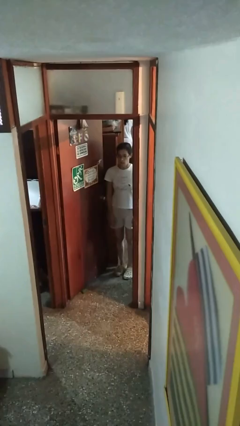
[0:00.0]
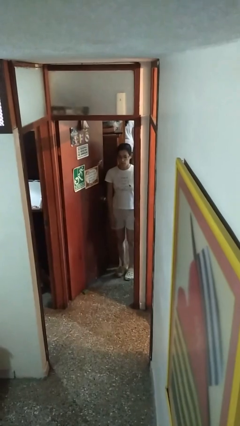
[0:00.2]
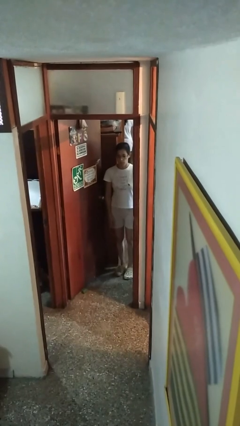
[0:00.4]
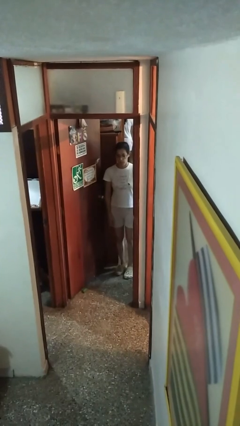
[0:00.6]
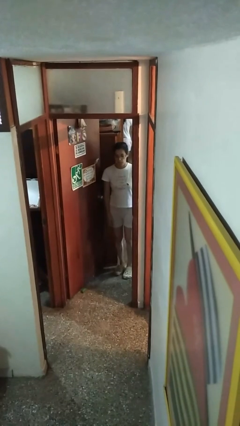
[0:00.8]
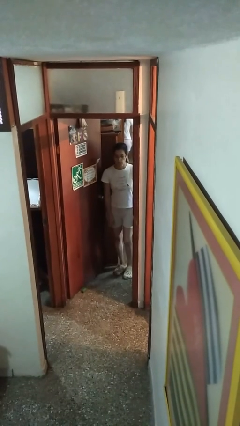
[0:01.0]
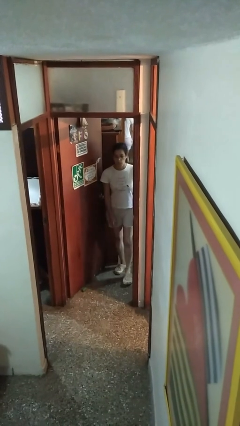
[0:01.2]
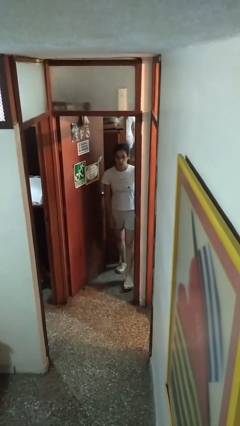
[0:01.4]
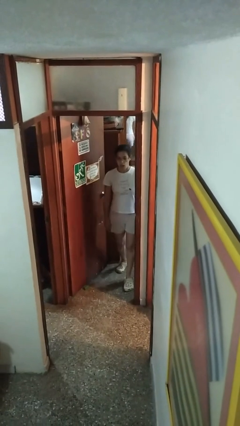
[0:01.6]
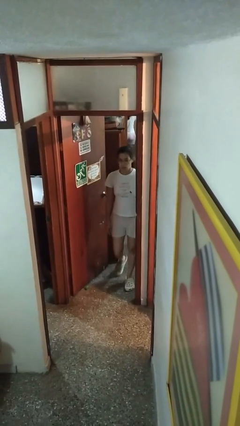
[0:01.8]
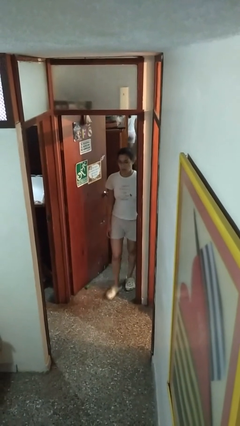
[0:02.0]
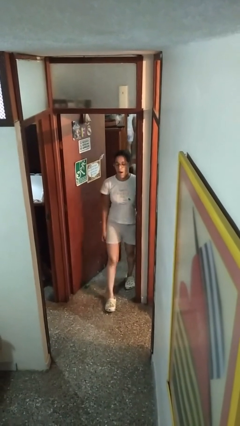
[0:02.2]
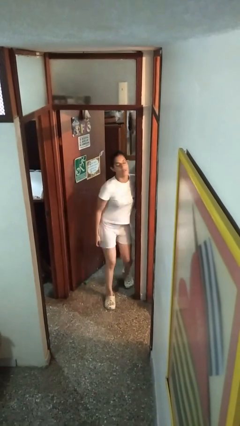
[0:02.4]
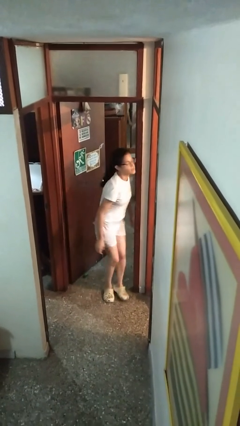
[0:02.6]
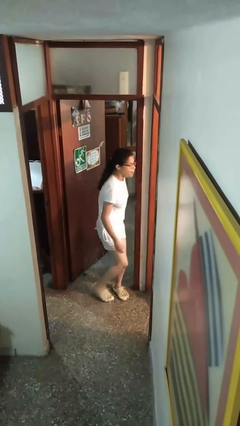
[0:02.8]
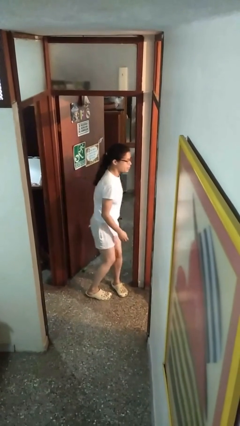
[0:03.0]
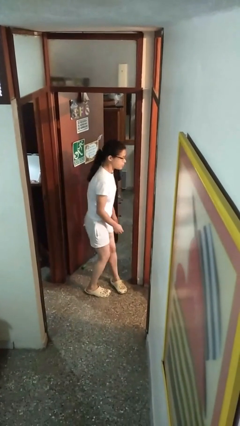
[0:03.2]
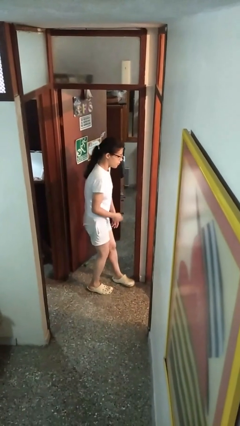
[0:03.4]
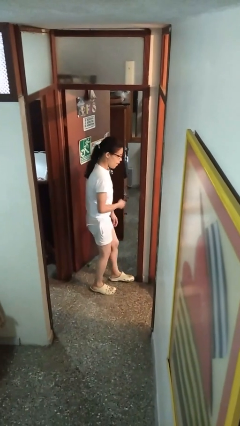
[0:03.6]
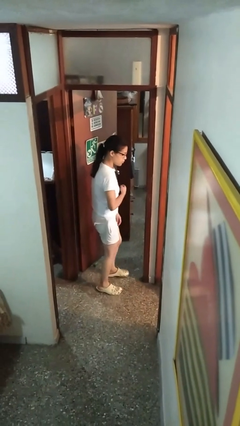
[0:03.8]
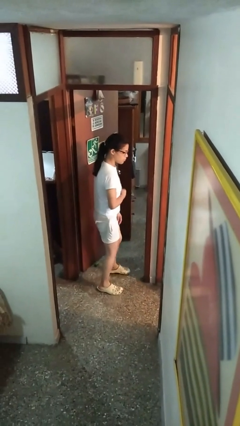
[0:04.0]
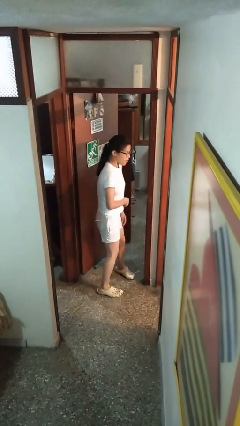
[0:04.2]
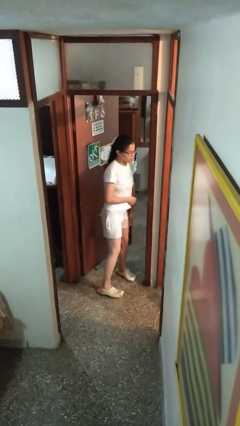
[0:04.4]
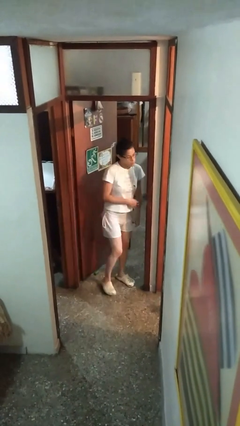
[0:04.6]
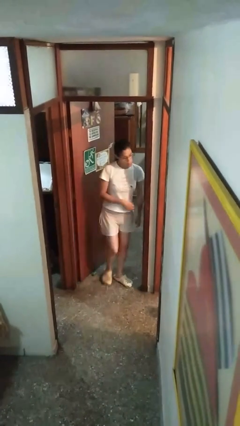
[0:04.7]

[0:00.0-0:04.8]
person bumps into wall

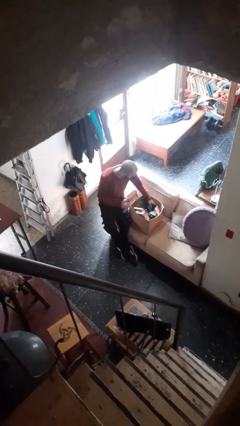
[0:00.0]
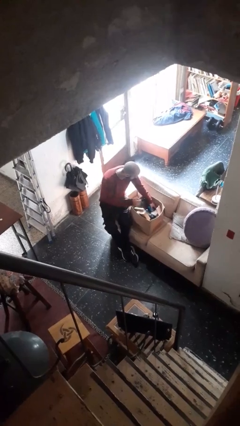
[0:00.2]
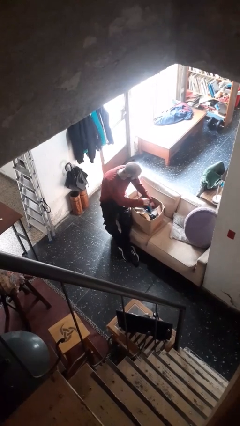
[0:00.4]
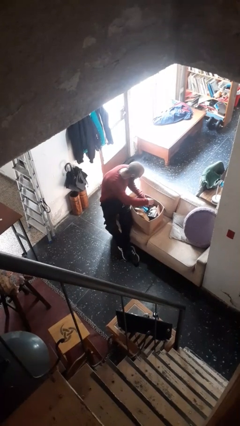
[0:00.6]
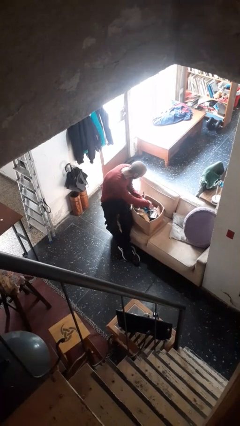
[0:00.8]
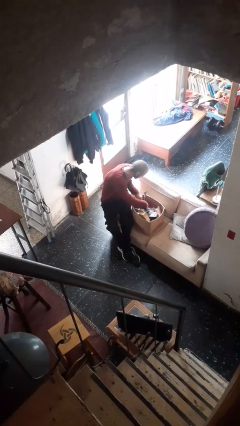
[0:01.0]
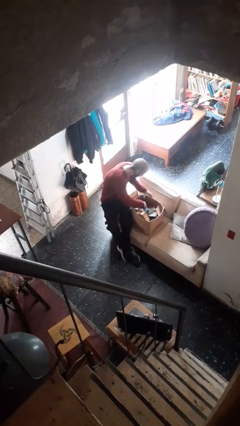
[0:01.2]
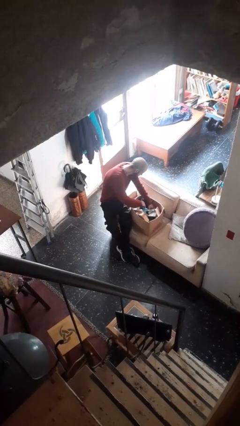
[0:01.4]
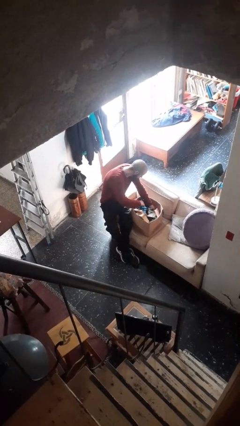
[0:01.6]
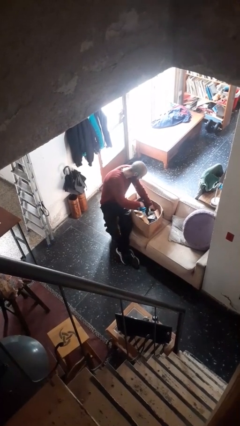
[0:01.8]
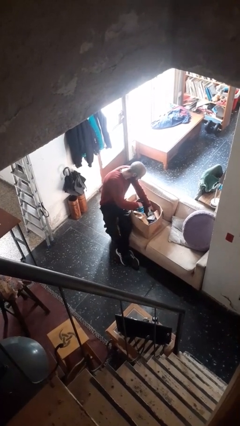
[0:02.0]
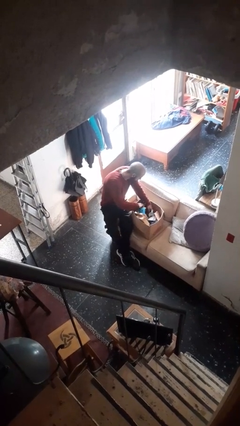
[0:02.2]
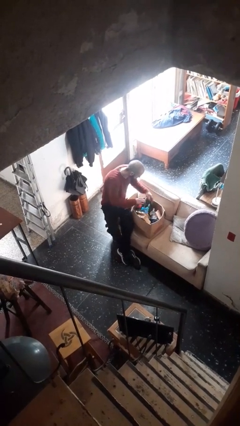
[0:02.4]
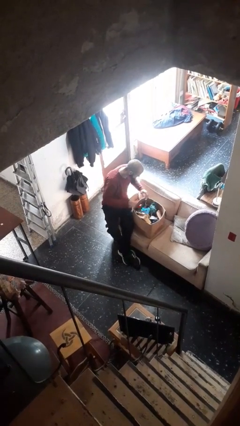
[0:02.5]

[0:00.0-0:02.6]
person searches in box

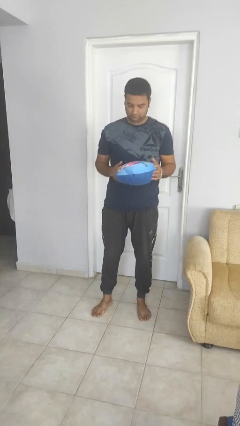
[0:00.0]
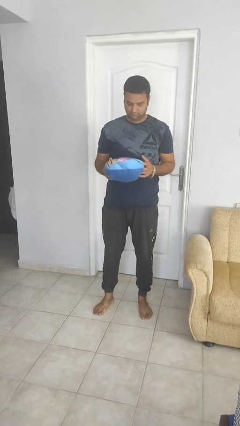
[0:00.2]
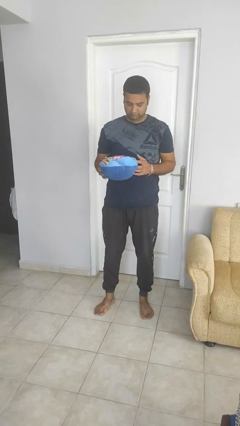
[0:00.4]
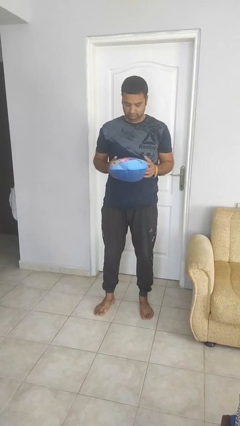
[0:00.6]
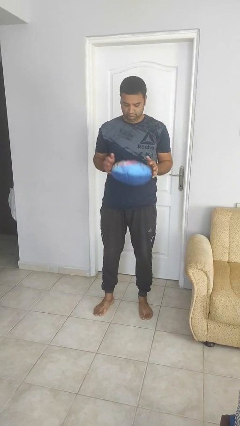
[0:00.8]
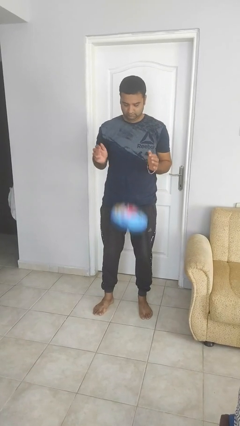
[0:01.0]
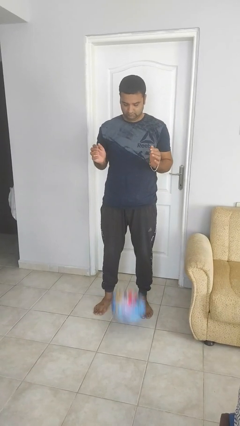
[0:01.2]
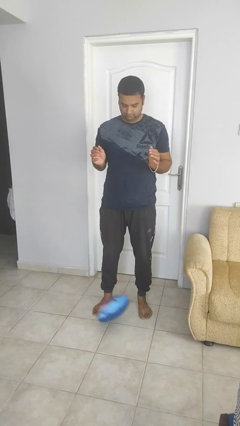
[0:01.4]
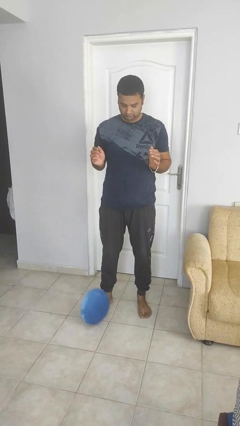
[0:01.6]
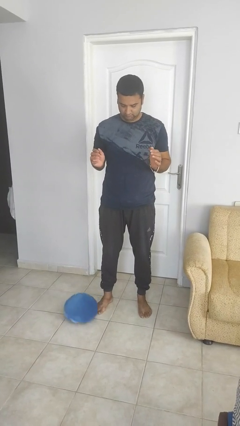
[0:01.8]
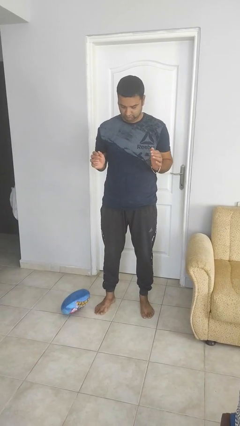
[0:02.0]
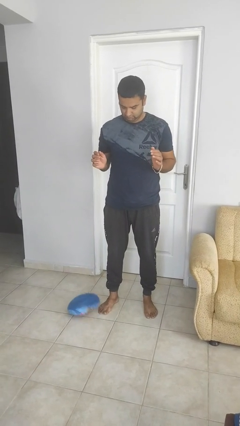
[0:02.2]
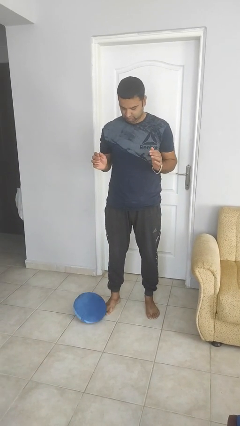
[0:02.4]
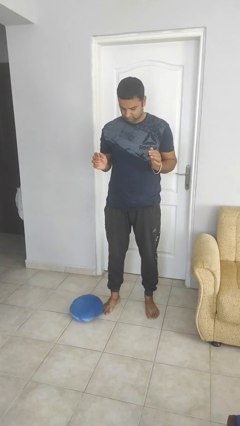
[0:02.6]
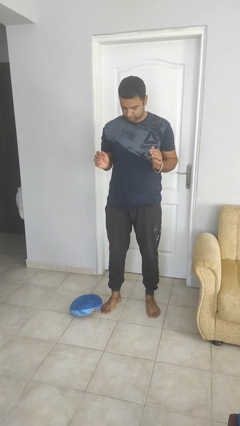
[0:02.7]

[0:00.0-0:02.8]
person drops object

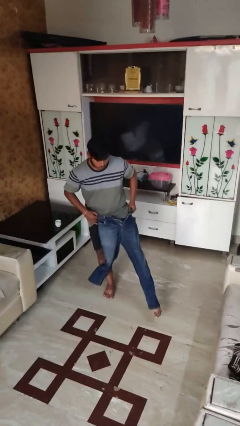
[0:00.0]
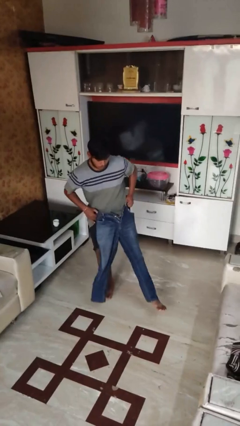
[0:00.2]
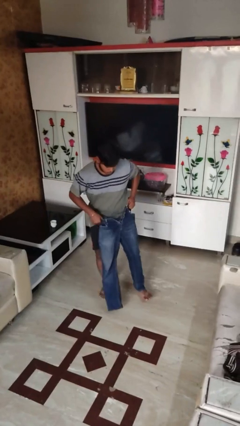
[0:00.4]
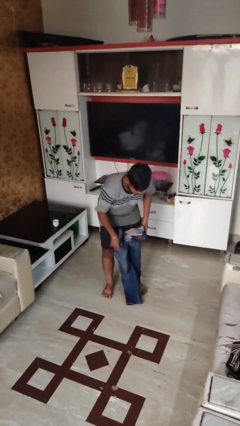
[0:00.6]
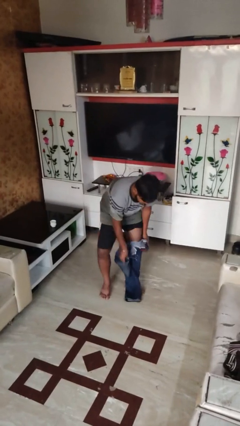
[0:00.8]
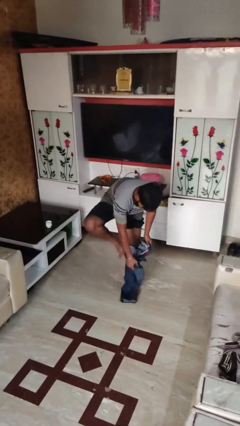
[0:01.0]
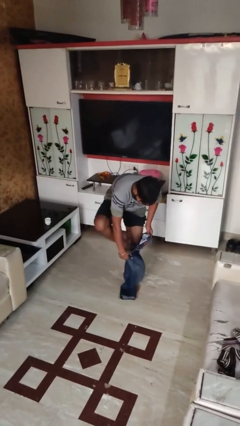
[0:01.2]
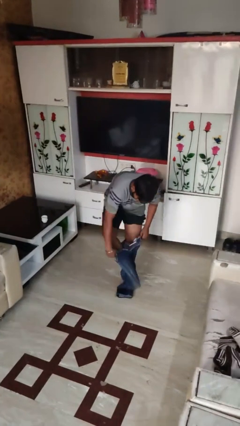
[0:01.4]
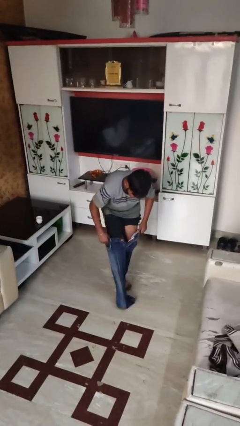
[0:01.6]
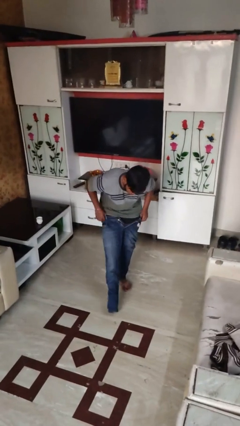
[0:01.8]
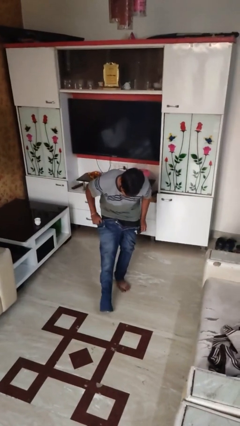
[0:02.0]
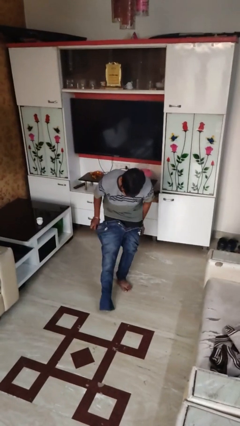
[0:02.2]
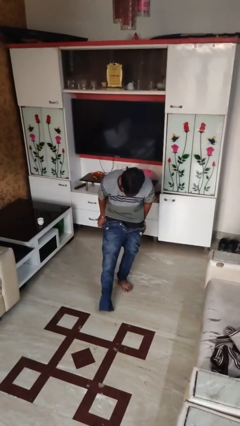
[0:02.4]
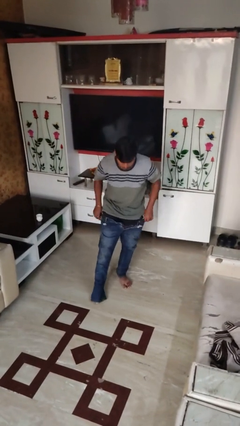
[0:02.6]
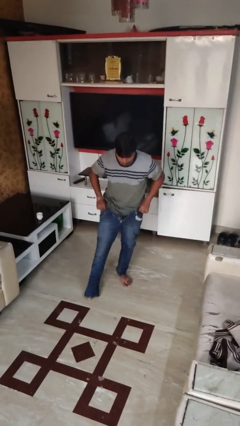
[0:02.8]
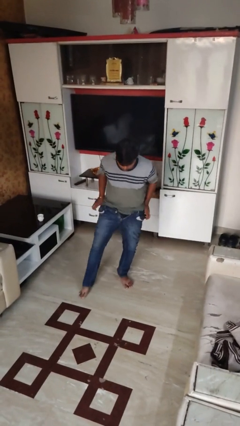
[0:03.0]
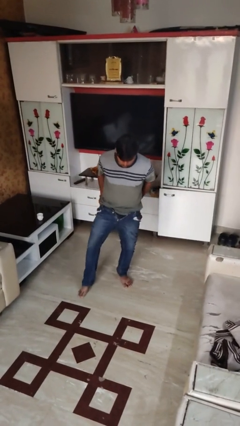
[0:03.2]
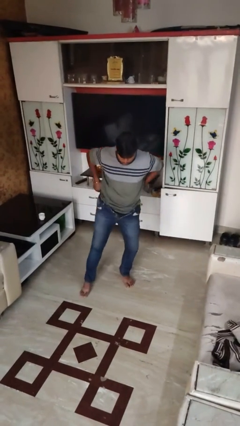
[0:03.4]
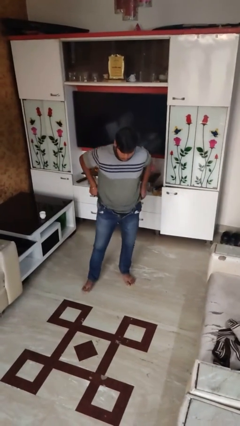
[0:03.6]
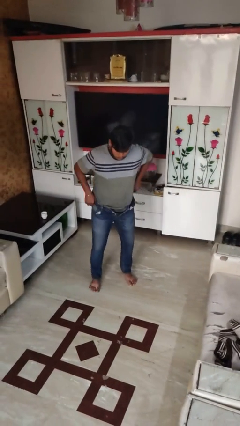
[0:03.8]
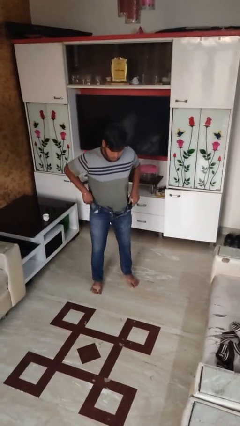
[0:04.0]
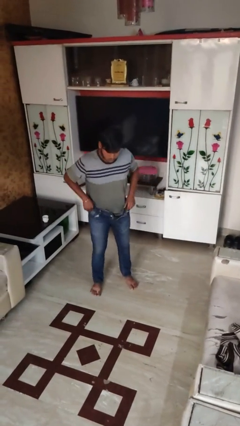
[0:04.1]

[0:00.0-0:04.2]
person puts on pants

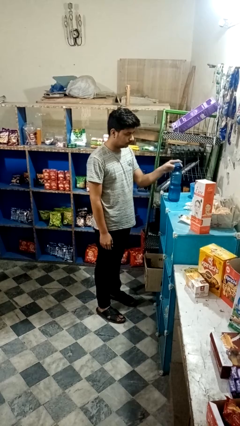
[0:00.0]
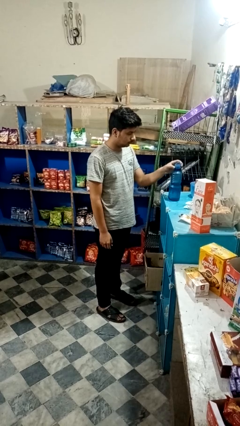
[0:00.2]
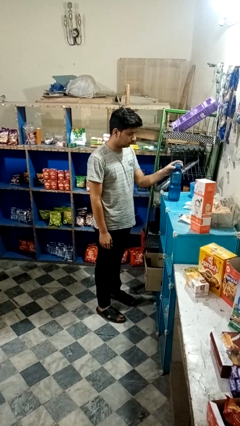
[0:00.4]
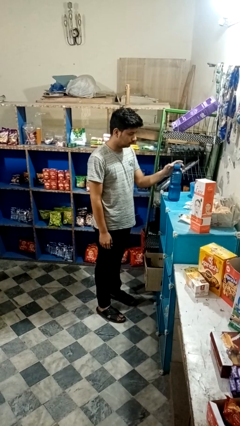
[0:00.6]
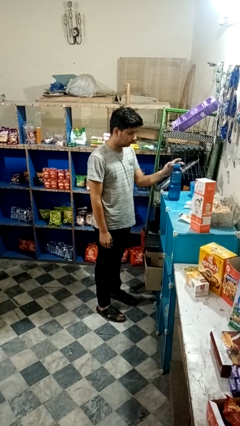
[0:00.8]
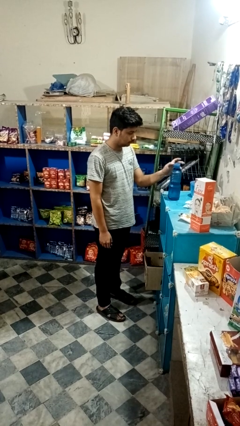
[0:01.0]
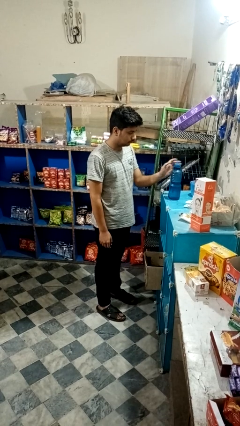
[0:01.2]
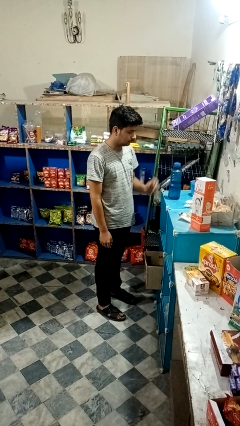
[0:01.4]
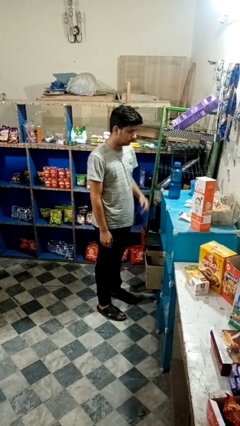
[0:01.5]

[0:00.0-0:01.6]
person screws lid to bottle

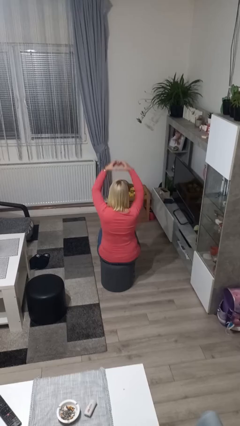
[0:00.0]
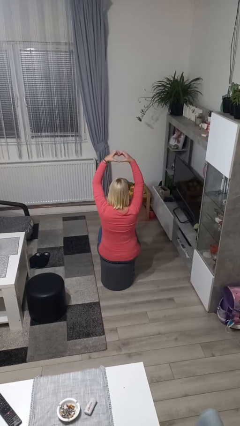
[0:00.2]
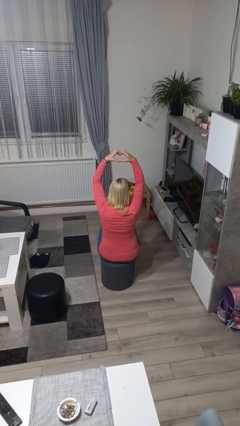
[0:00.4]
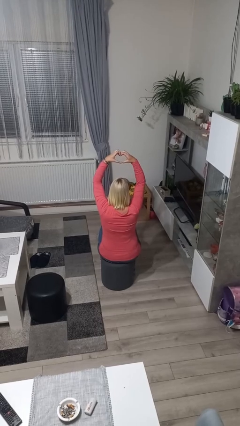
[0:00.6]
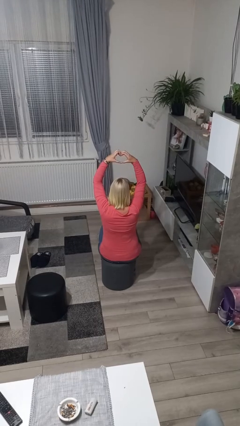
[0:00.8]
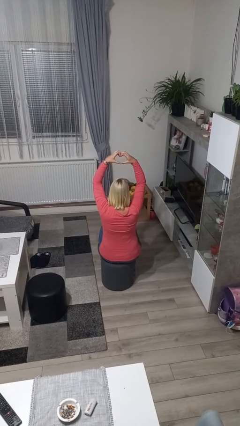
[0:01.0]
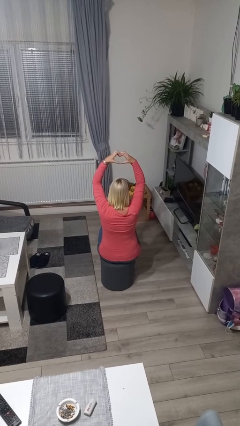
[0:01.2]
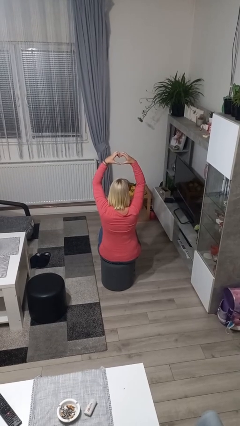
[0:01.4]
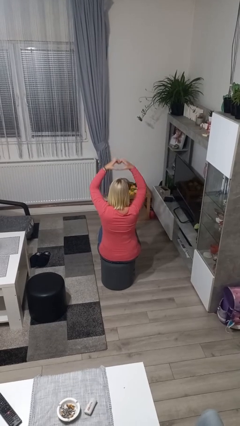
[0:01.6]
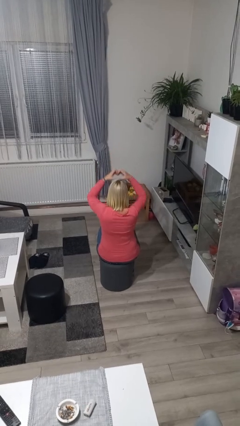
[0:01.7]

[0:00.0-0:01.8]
person gestures heart
